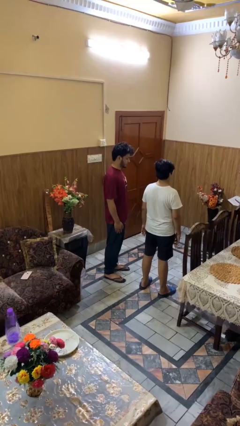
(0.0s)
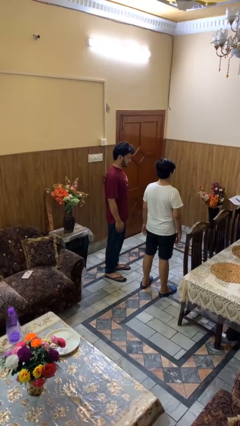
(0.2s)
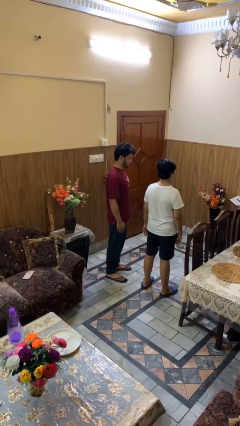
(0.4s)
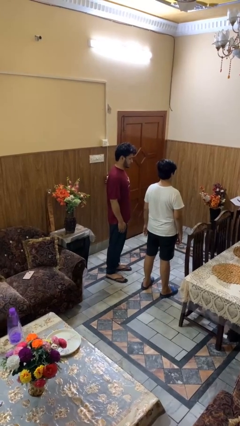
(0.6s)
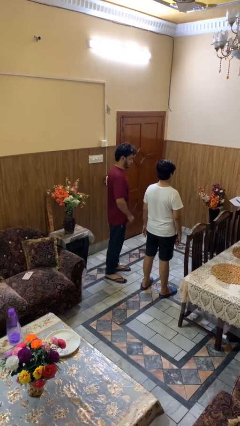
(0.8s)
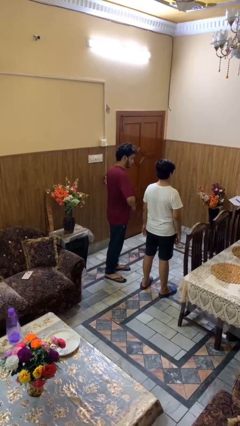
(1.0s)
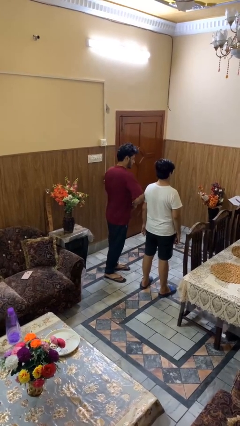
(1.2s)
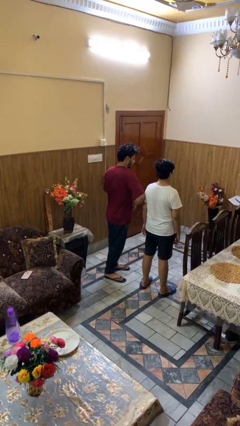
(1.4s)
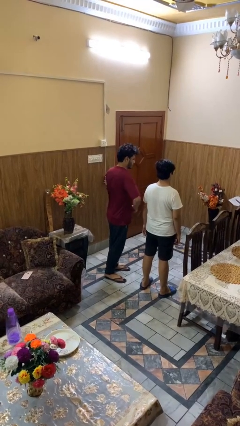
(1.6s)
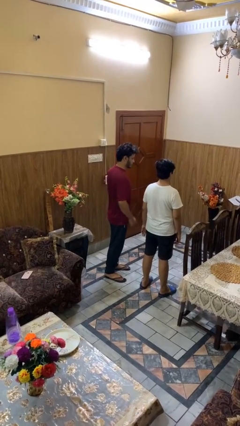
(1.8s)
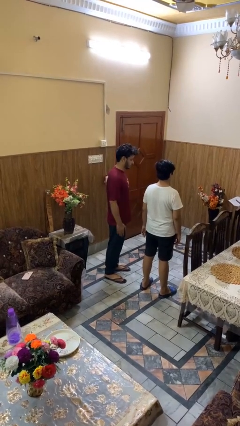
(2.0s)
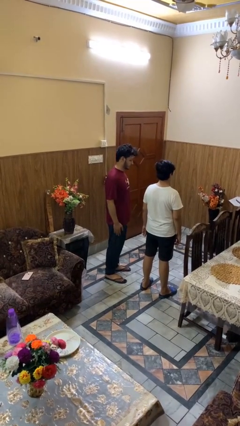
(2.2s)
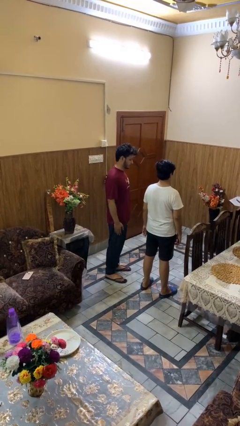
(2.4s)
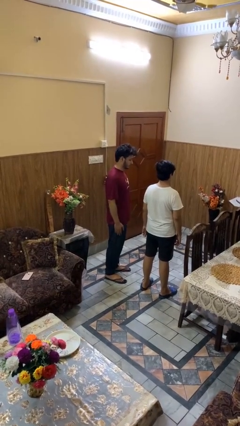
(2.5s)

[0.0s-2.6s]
person nudges person with elbow

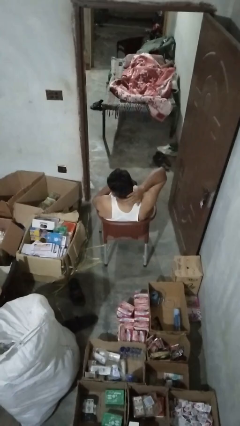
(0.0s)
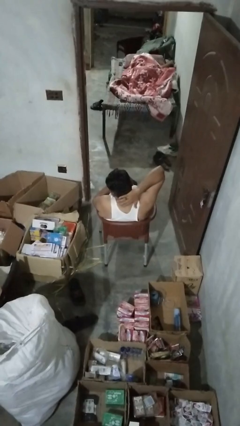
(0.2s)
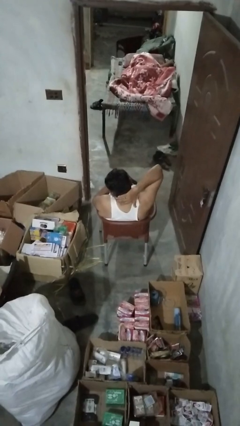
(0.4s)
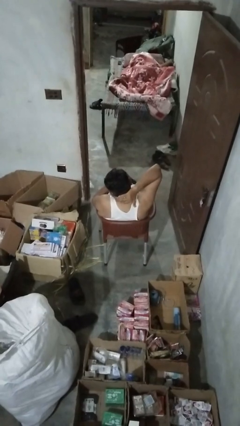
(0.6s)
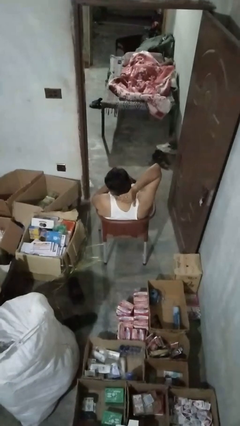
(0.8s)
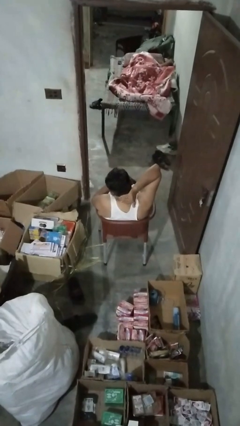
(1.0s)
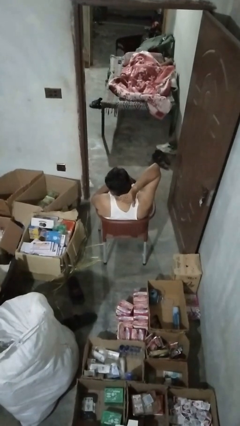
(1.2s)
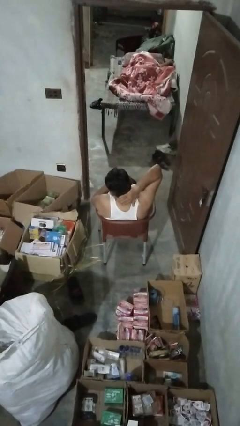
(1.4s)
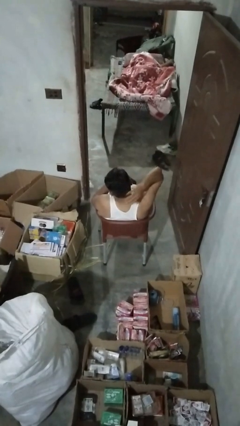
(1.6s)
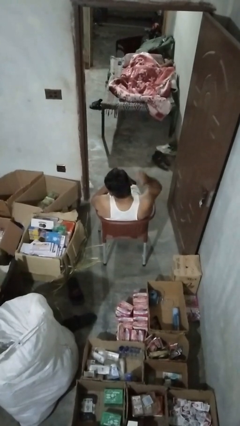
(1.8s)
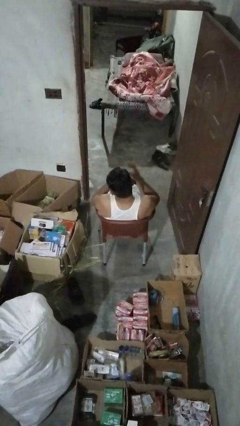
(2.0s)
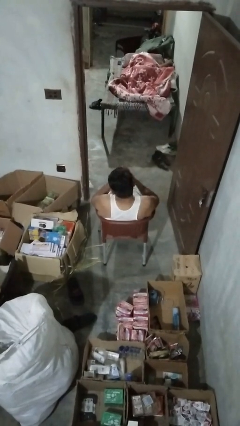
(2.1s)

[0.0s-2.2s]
person rubs neck

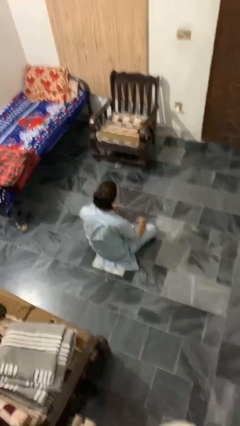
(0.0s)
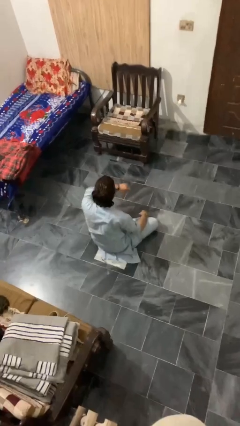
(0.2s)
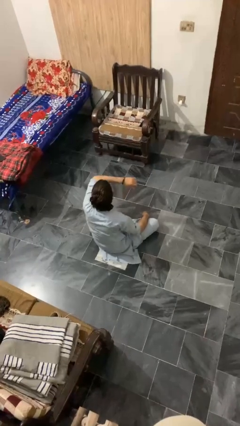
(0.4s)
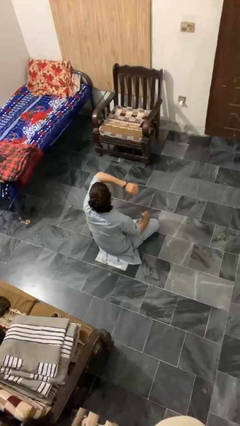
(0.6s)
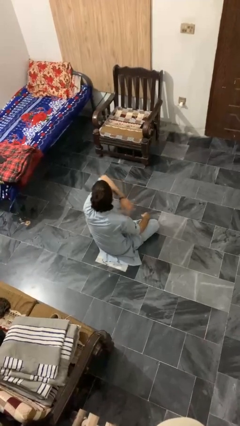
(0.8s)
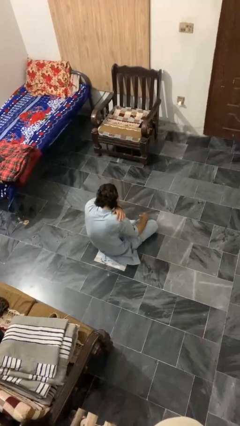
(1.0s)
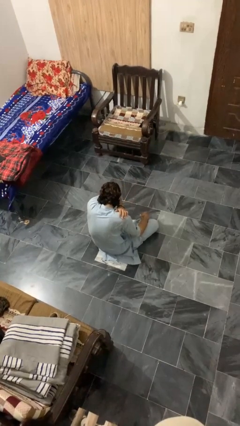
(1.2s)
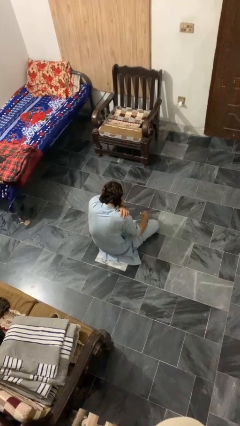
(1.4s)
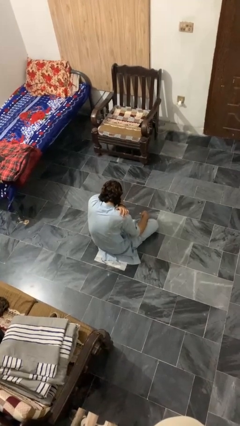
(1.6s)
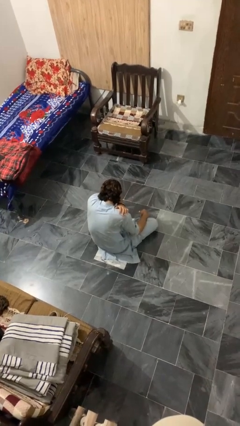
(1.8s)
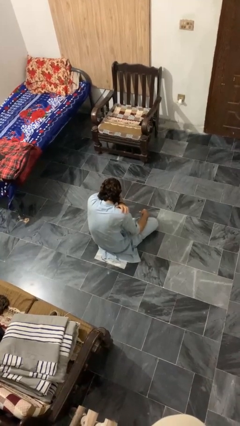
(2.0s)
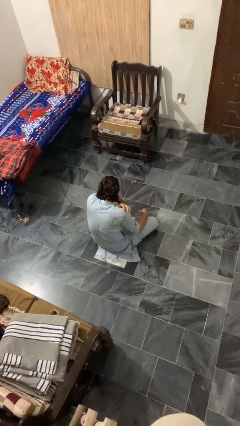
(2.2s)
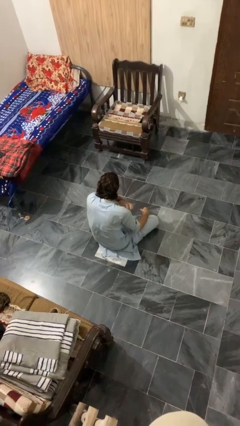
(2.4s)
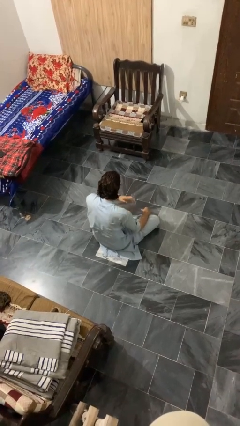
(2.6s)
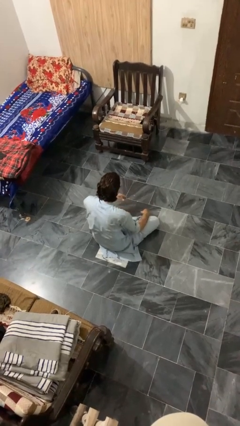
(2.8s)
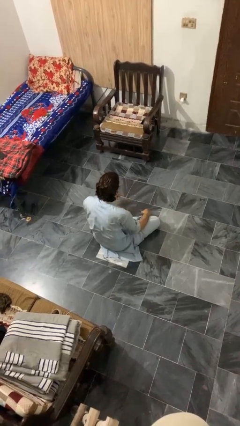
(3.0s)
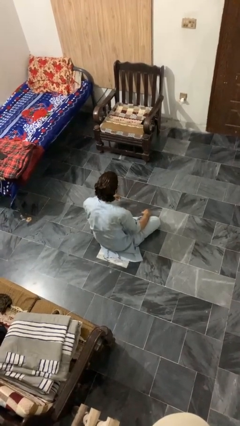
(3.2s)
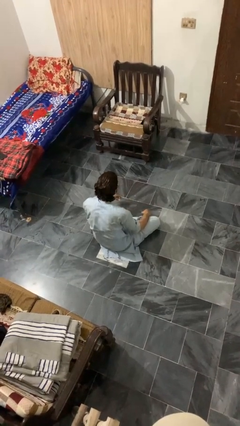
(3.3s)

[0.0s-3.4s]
person sneezes into arm

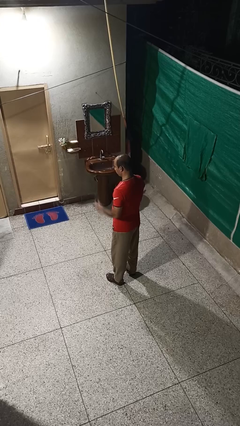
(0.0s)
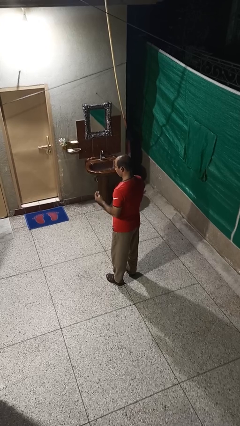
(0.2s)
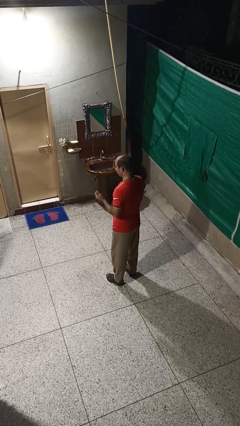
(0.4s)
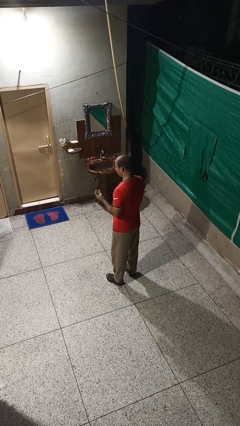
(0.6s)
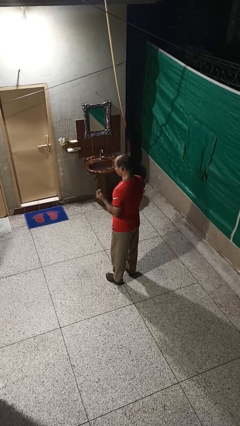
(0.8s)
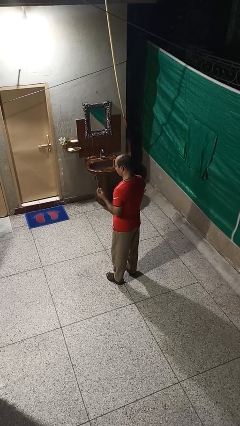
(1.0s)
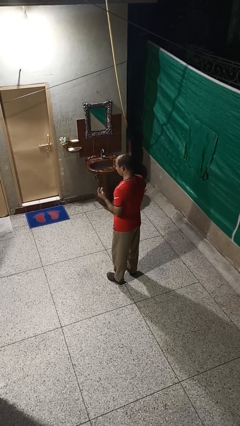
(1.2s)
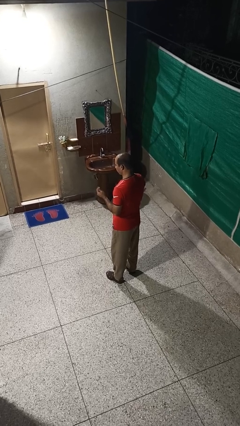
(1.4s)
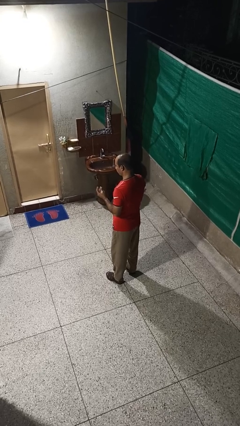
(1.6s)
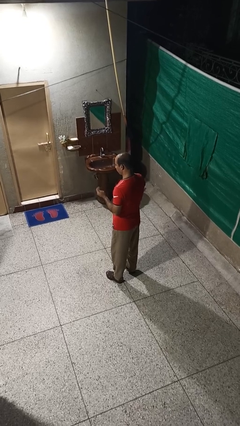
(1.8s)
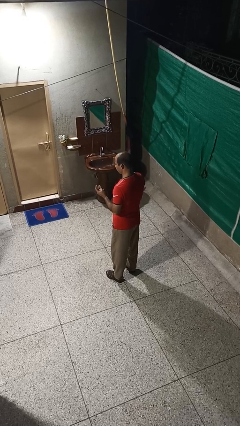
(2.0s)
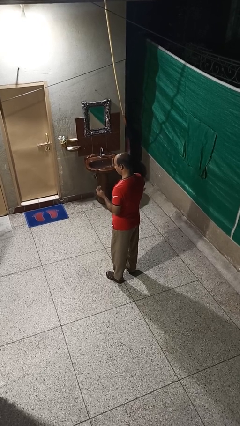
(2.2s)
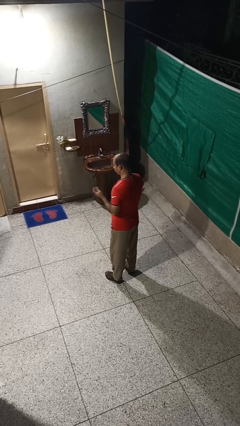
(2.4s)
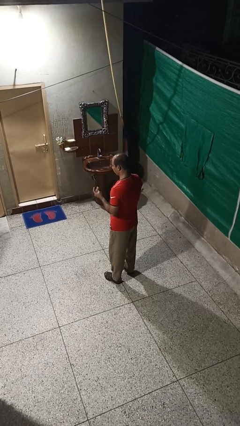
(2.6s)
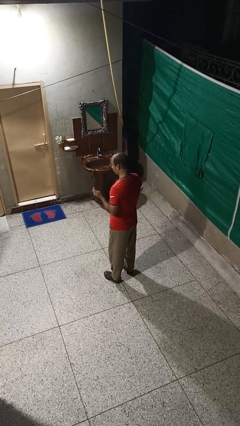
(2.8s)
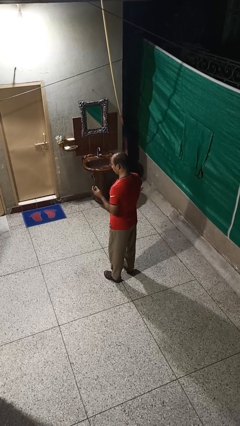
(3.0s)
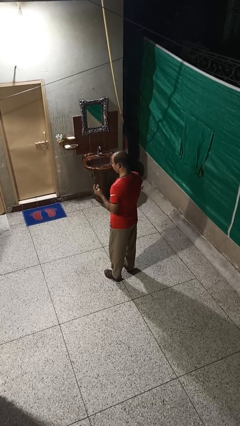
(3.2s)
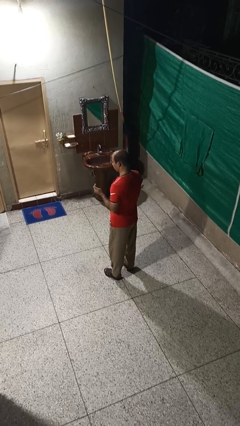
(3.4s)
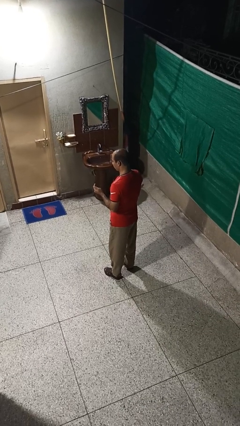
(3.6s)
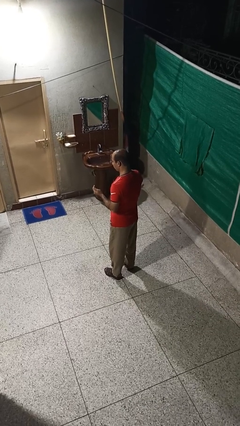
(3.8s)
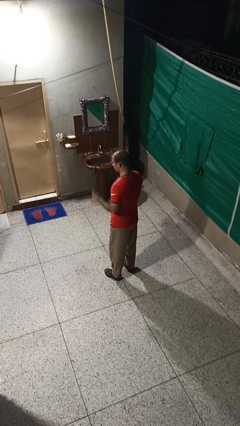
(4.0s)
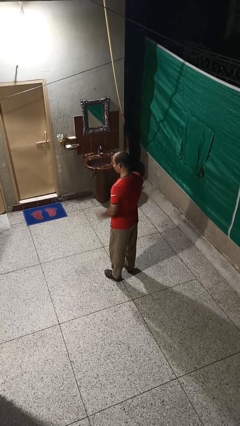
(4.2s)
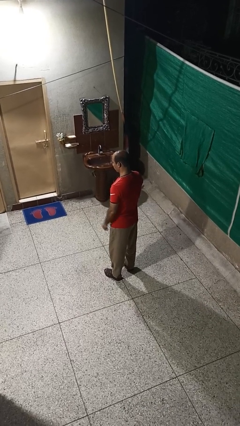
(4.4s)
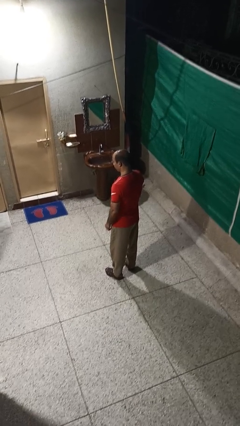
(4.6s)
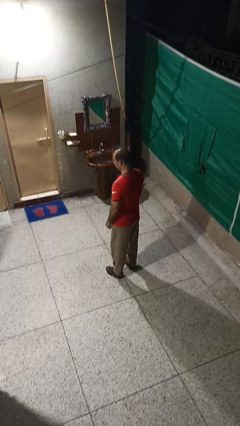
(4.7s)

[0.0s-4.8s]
person snaps fingers

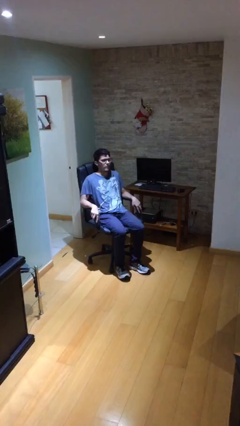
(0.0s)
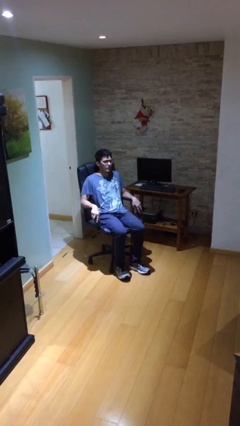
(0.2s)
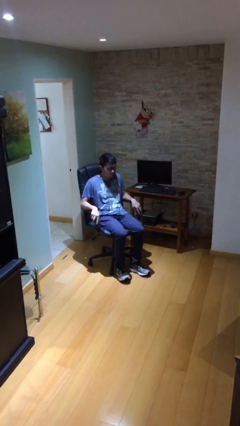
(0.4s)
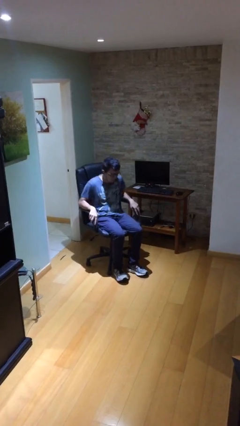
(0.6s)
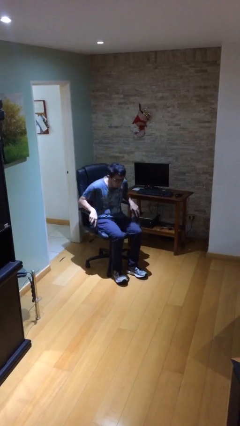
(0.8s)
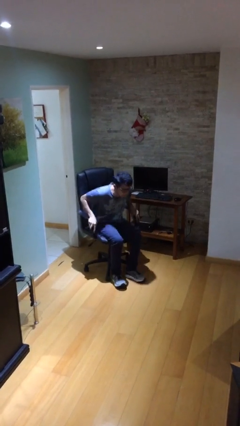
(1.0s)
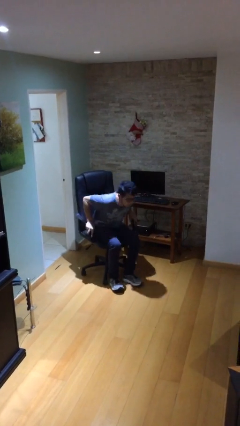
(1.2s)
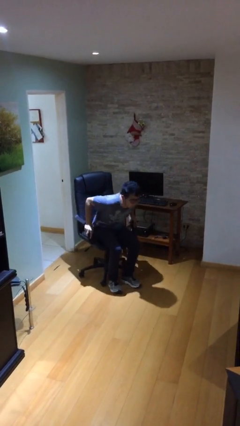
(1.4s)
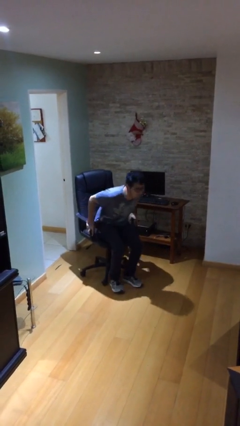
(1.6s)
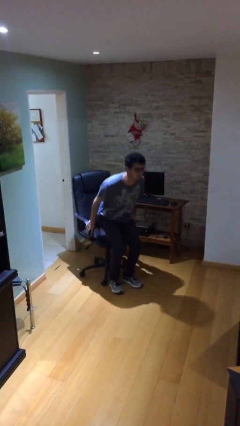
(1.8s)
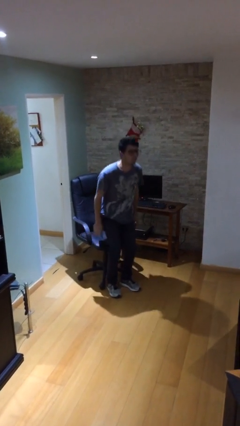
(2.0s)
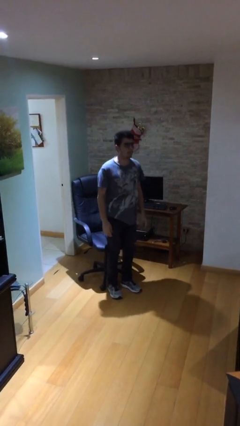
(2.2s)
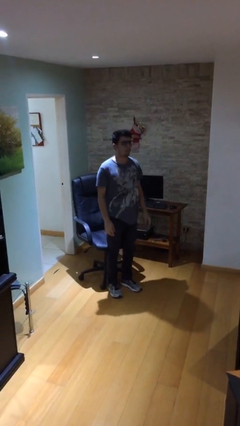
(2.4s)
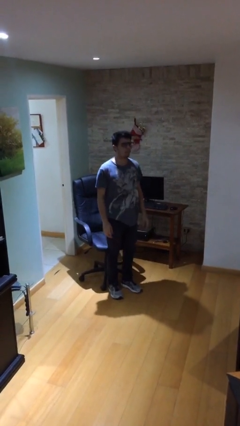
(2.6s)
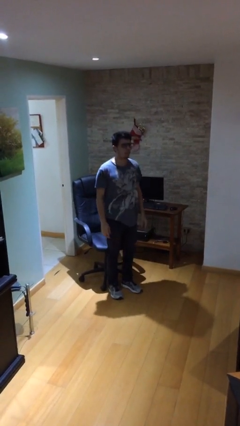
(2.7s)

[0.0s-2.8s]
person stands up

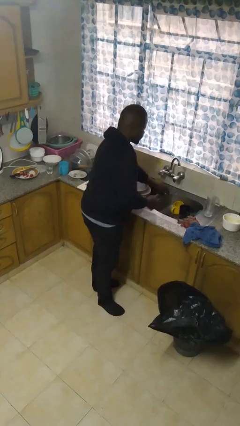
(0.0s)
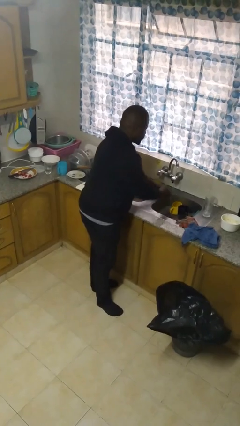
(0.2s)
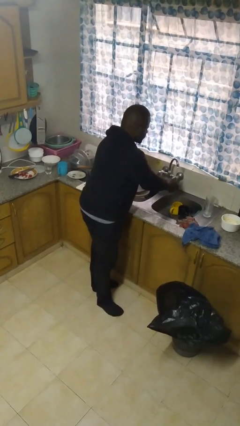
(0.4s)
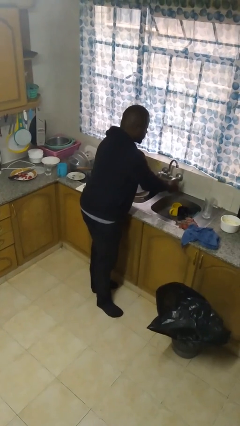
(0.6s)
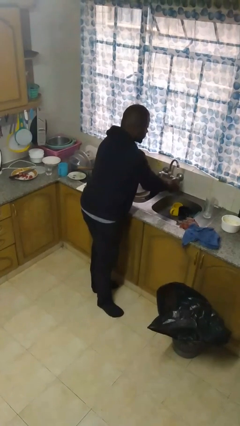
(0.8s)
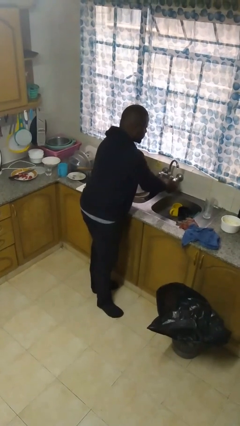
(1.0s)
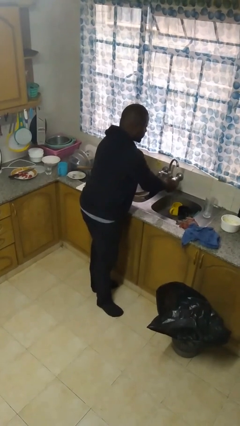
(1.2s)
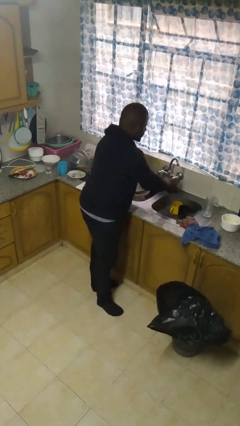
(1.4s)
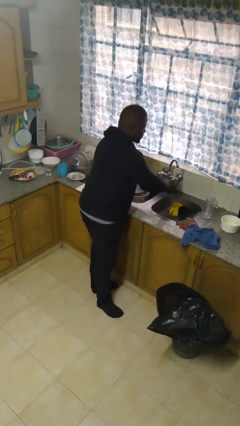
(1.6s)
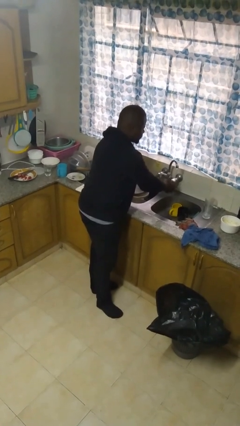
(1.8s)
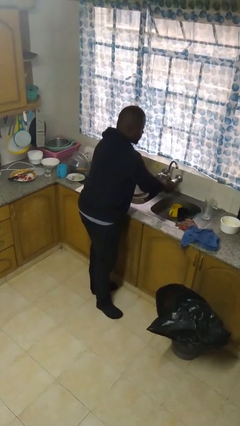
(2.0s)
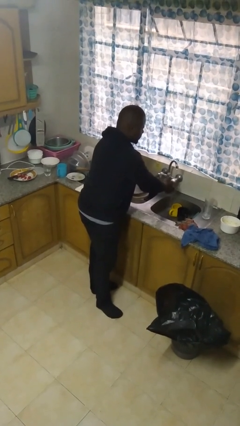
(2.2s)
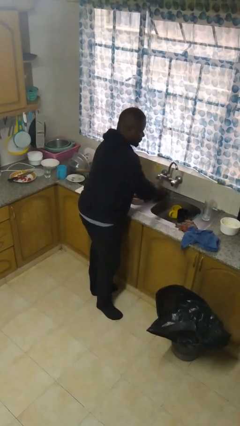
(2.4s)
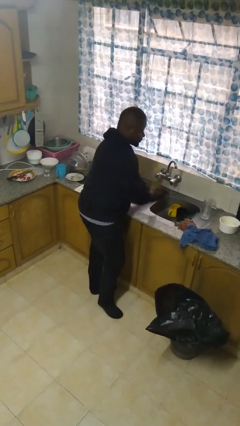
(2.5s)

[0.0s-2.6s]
person washes hands
